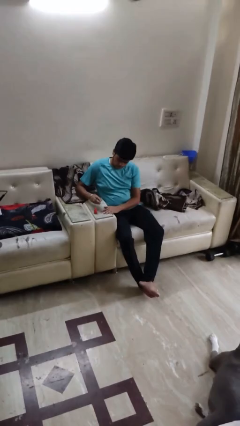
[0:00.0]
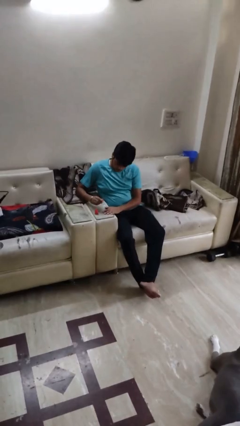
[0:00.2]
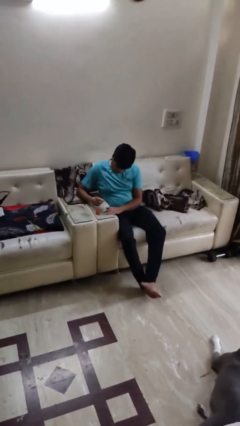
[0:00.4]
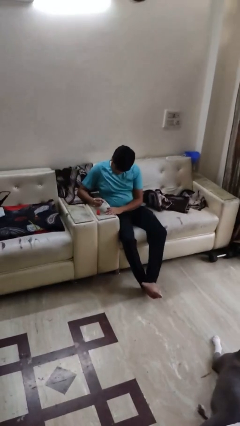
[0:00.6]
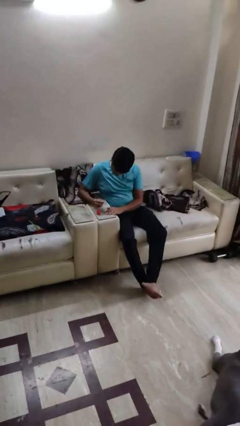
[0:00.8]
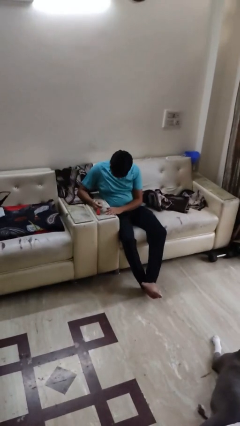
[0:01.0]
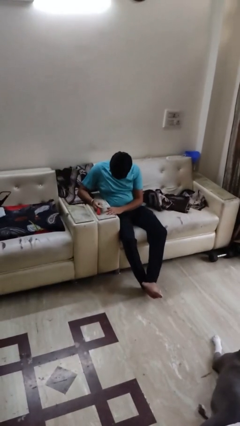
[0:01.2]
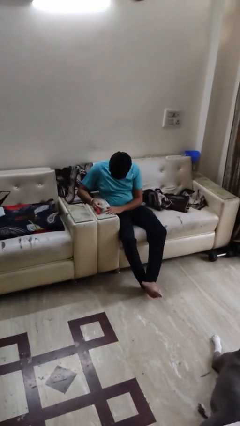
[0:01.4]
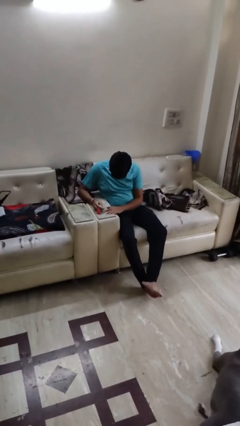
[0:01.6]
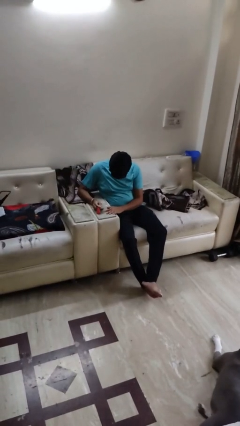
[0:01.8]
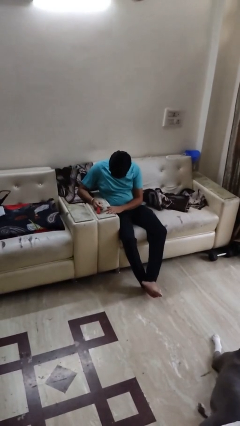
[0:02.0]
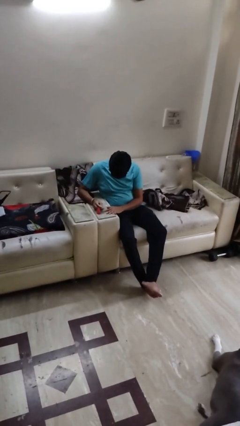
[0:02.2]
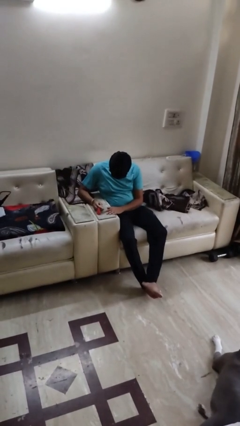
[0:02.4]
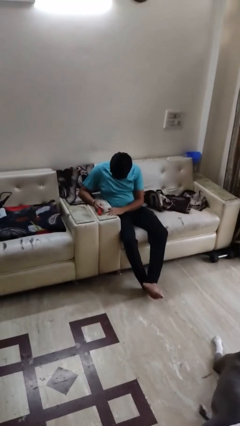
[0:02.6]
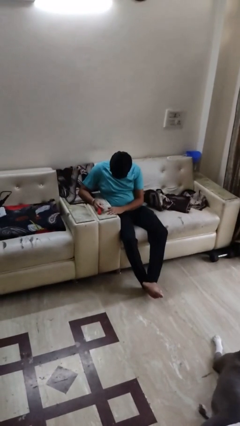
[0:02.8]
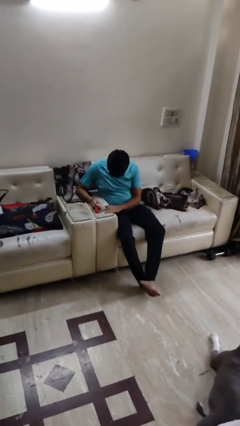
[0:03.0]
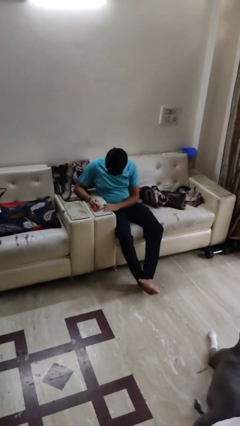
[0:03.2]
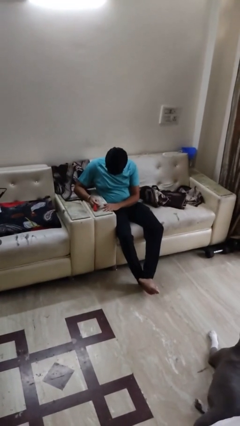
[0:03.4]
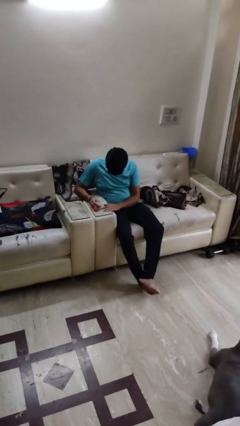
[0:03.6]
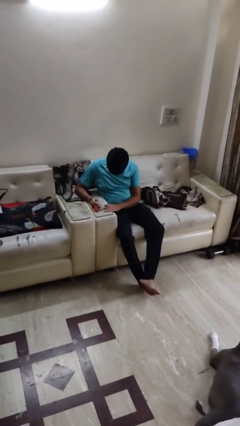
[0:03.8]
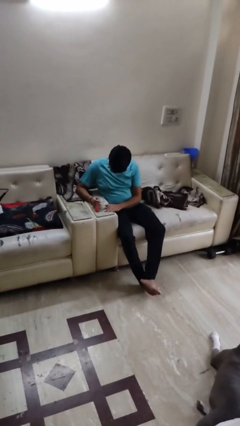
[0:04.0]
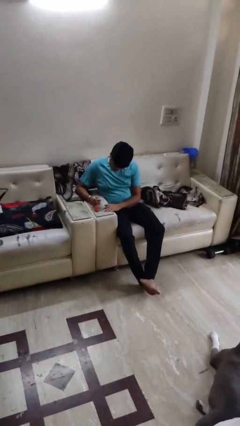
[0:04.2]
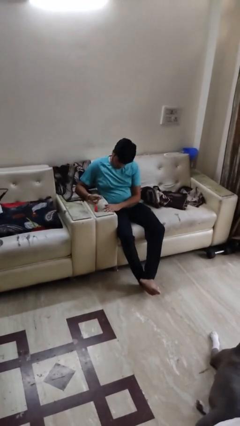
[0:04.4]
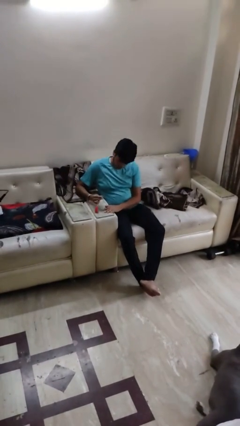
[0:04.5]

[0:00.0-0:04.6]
person paints fingernails

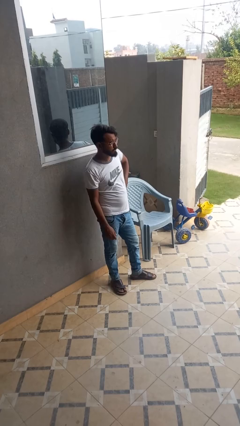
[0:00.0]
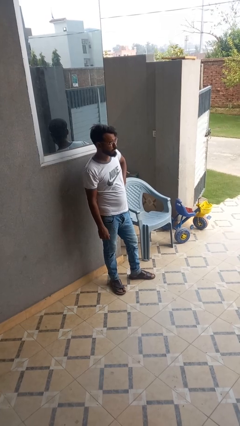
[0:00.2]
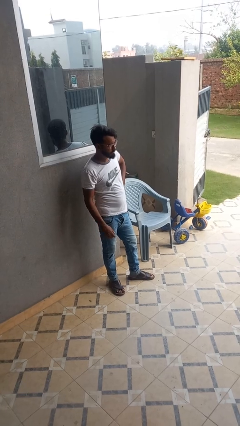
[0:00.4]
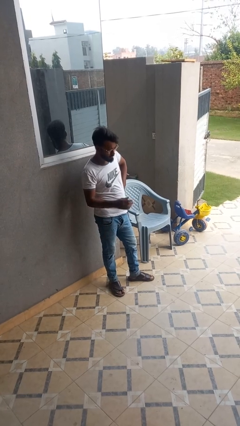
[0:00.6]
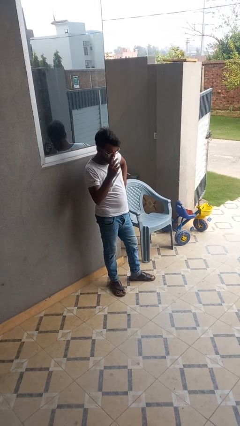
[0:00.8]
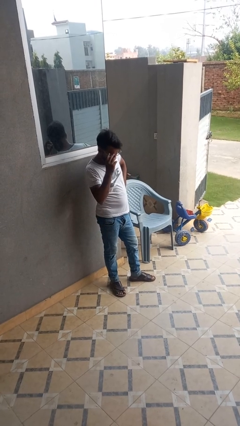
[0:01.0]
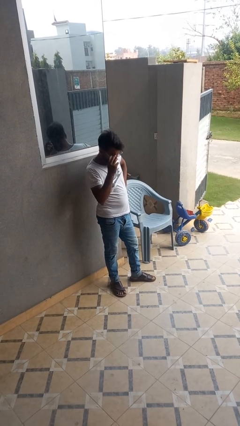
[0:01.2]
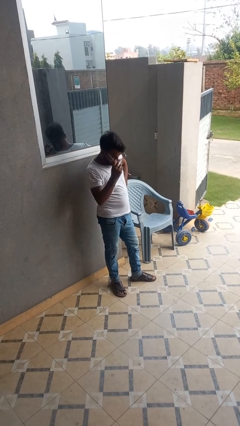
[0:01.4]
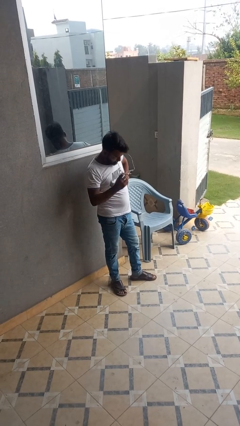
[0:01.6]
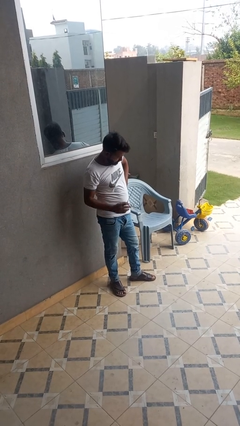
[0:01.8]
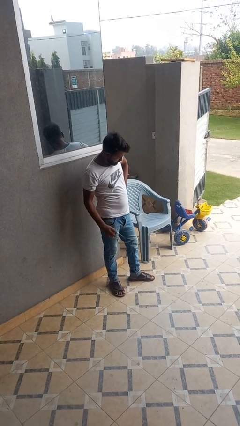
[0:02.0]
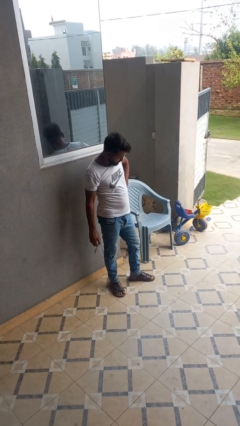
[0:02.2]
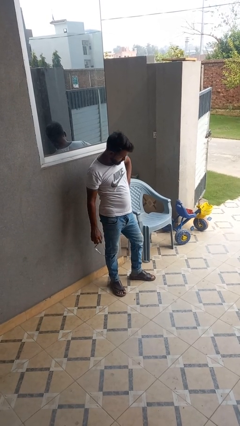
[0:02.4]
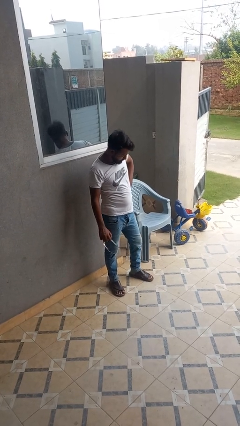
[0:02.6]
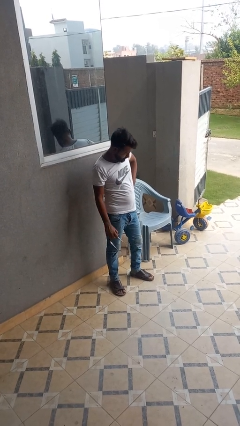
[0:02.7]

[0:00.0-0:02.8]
person takes off glasses

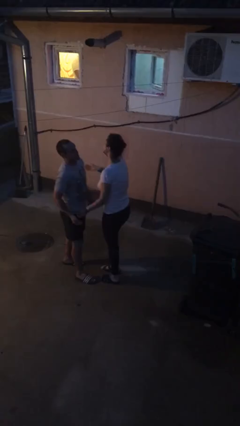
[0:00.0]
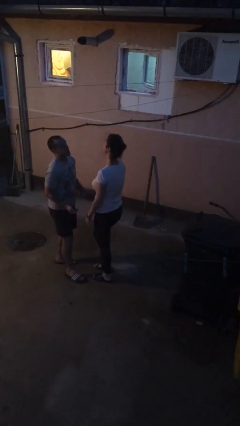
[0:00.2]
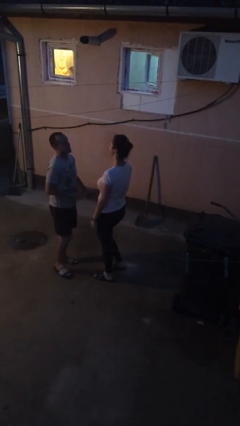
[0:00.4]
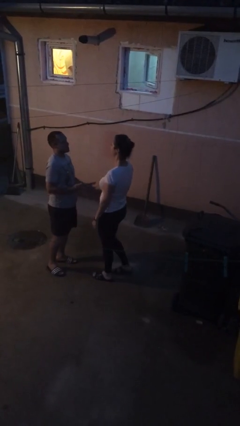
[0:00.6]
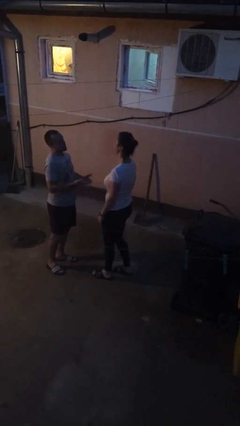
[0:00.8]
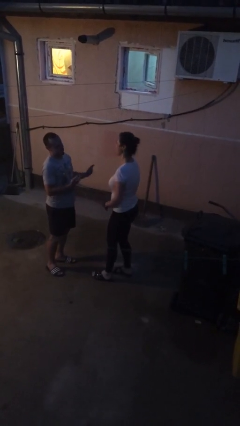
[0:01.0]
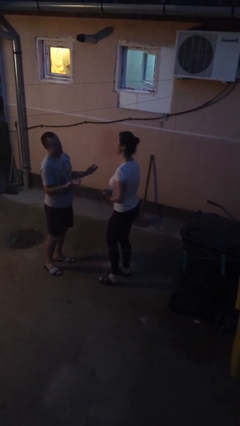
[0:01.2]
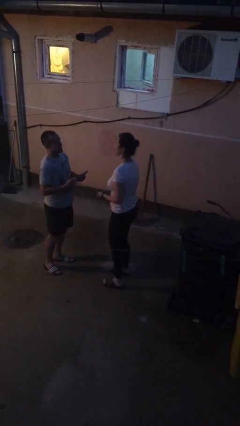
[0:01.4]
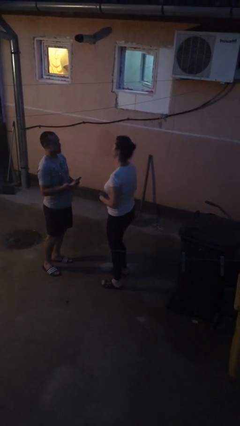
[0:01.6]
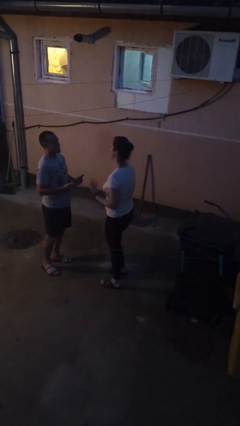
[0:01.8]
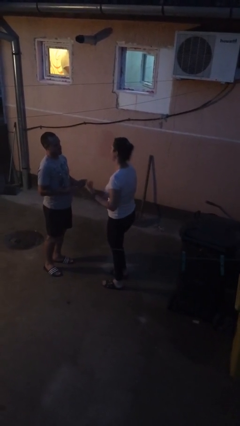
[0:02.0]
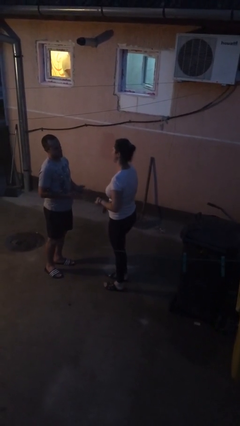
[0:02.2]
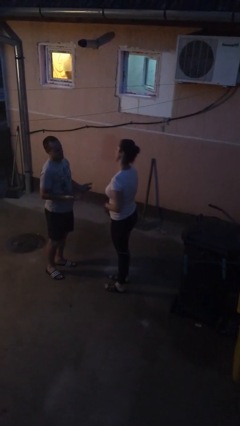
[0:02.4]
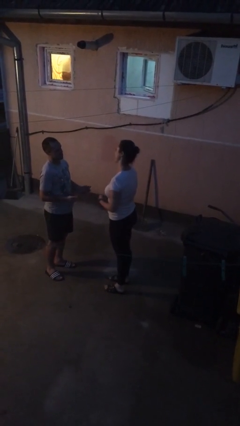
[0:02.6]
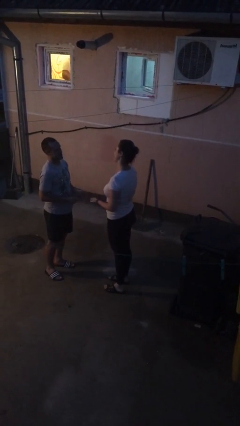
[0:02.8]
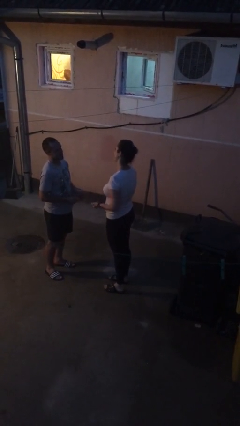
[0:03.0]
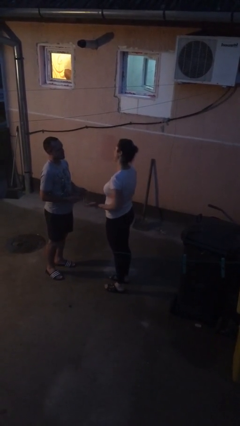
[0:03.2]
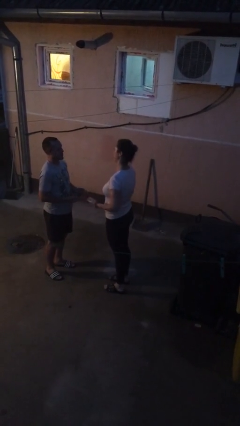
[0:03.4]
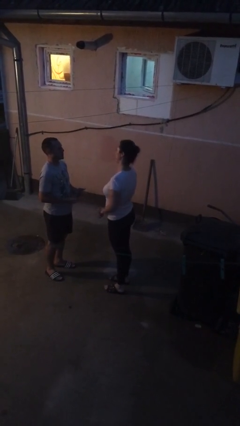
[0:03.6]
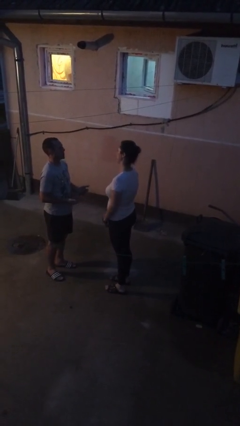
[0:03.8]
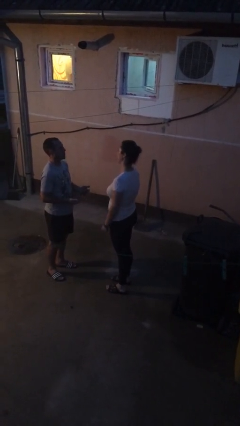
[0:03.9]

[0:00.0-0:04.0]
person talks to person

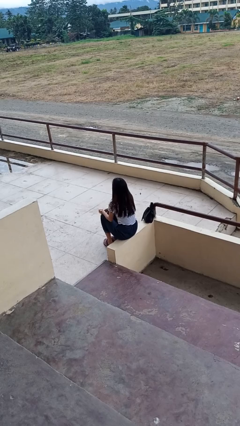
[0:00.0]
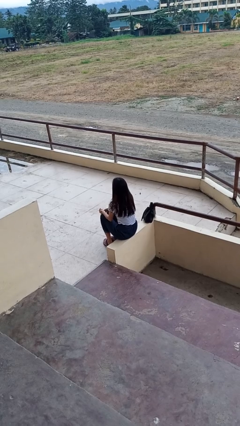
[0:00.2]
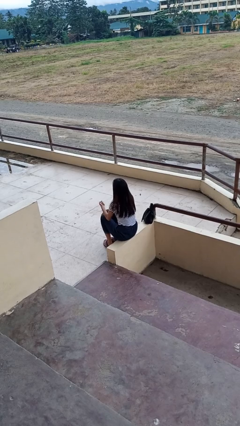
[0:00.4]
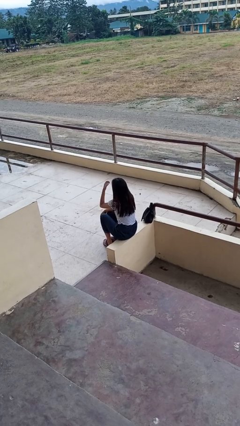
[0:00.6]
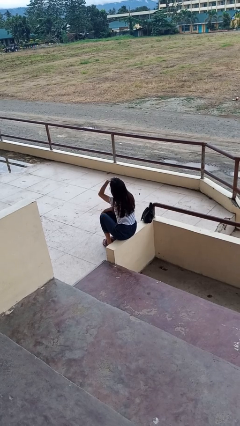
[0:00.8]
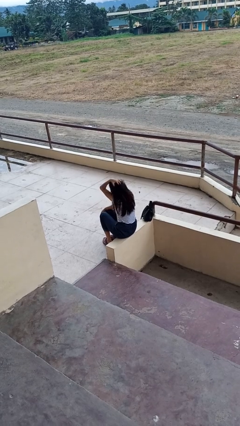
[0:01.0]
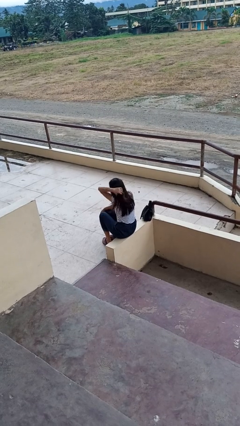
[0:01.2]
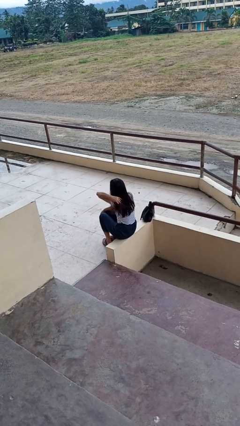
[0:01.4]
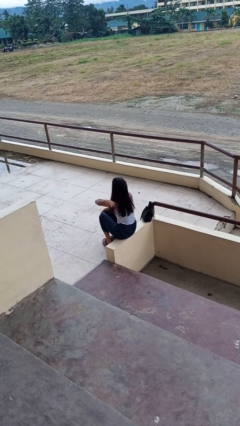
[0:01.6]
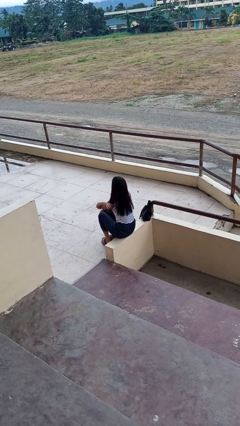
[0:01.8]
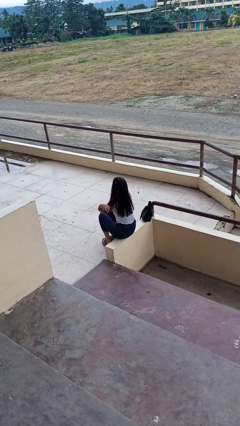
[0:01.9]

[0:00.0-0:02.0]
person strokes hair

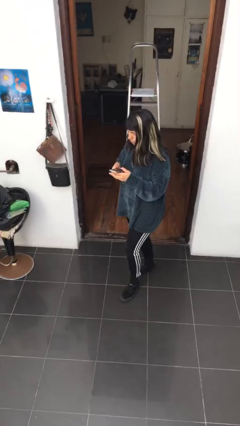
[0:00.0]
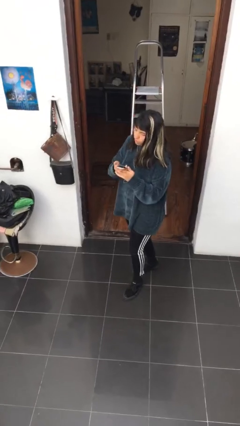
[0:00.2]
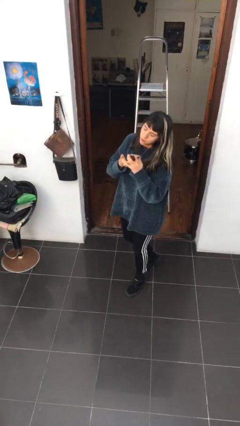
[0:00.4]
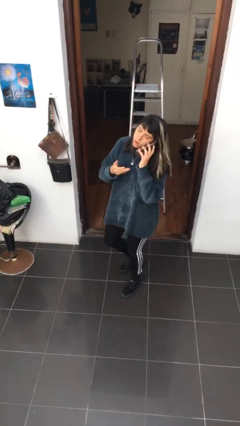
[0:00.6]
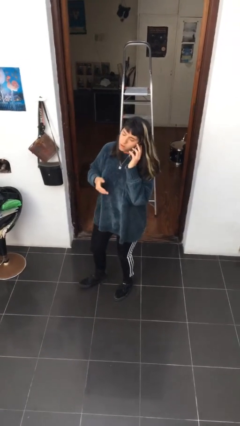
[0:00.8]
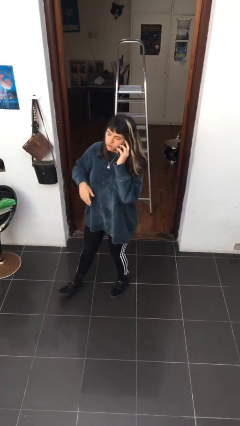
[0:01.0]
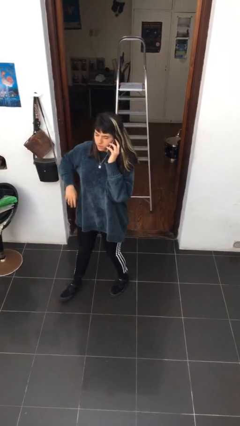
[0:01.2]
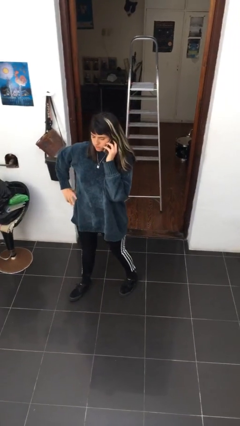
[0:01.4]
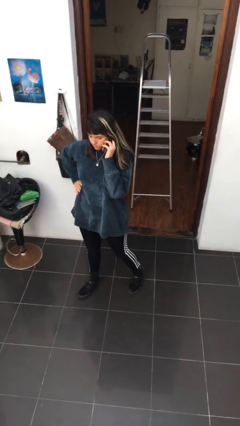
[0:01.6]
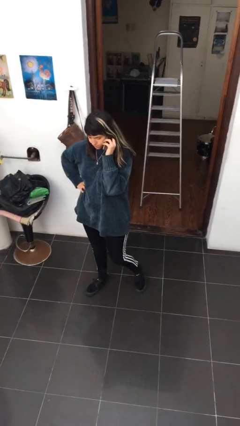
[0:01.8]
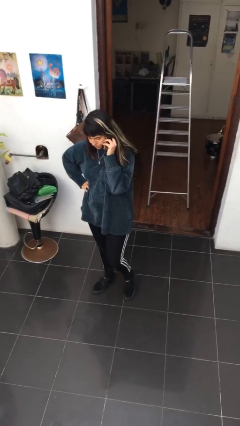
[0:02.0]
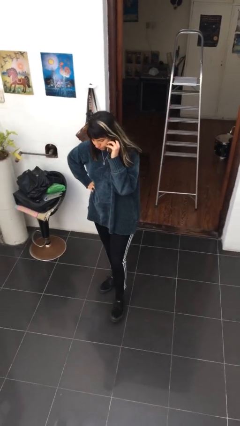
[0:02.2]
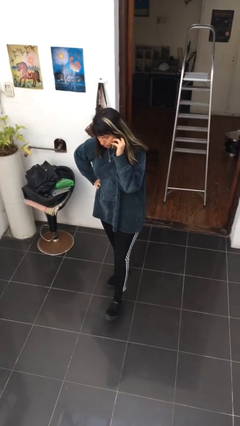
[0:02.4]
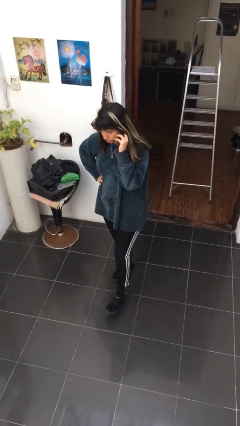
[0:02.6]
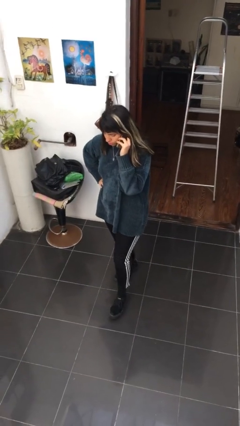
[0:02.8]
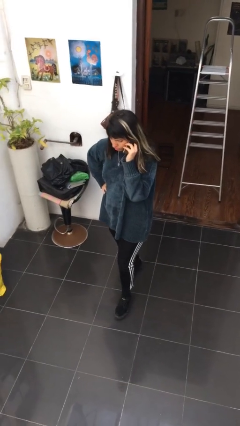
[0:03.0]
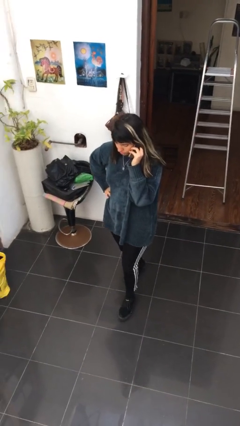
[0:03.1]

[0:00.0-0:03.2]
person talks on phone

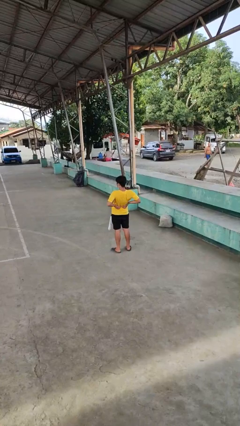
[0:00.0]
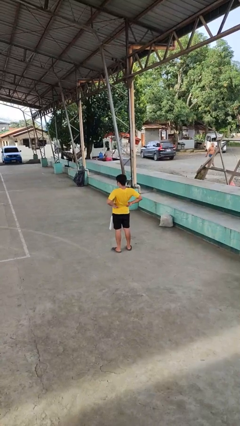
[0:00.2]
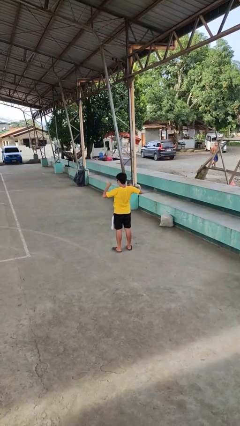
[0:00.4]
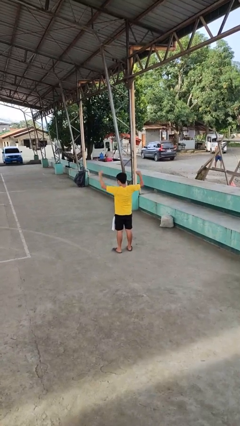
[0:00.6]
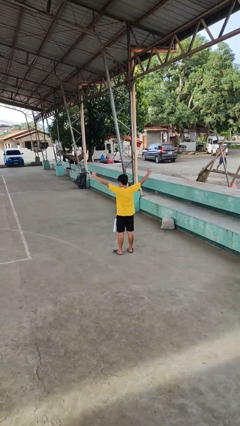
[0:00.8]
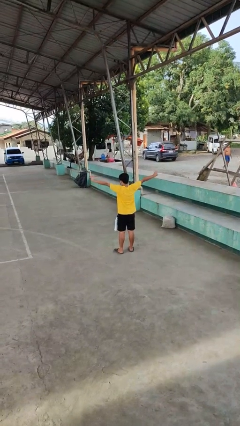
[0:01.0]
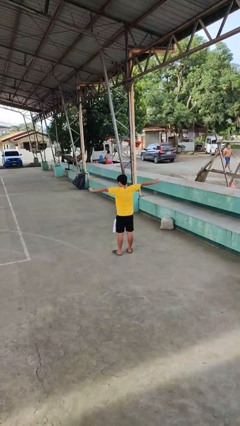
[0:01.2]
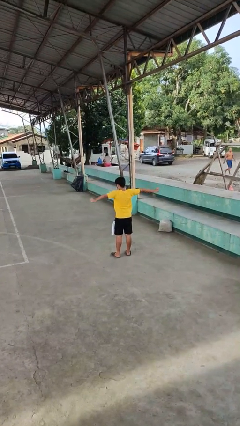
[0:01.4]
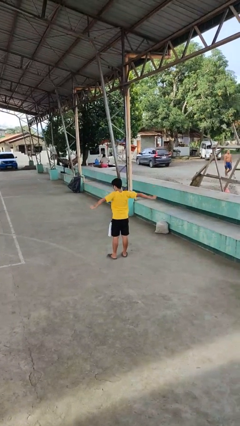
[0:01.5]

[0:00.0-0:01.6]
person stretches arms to side
